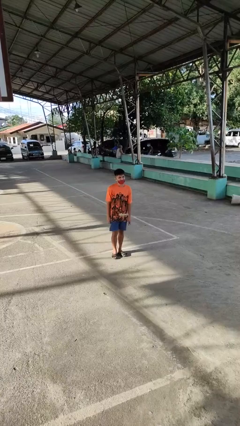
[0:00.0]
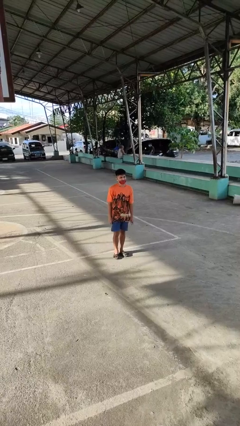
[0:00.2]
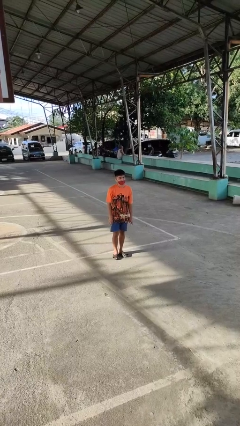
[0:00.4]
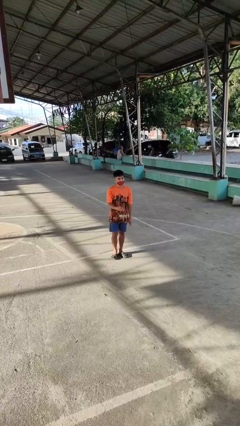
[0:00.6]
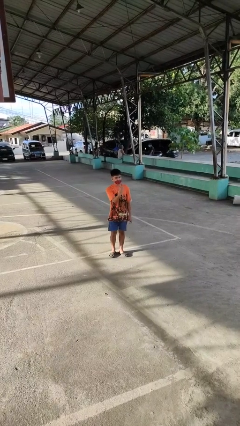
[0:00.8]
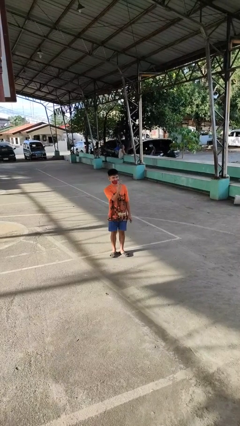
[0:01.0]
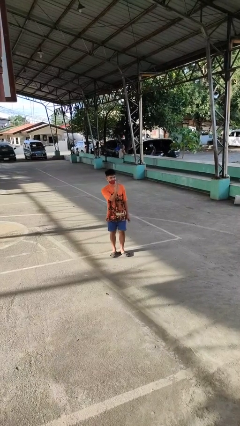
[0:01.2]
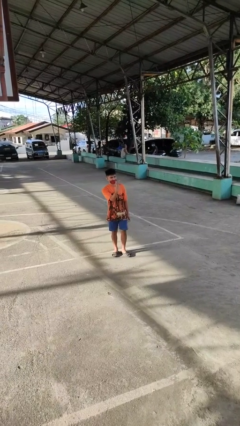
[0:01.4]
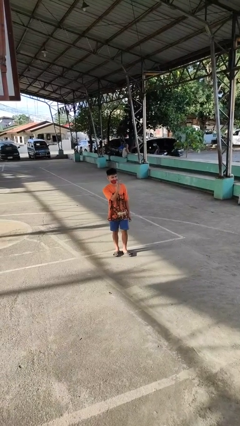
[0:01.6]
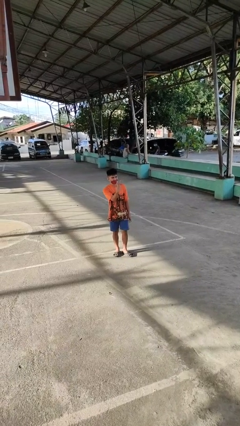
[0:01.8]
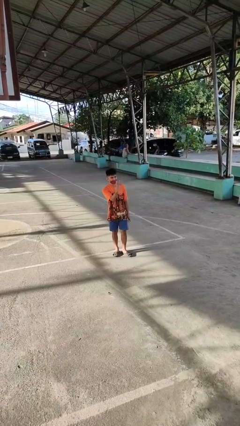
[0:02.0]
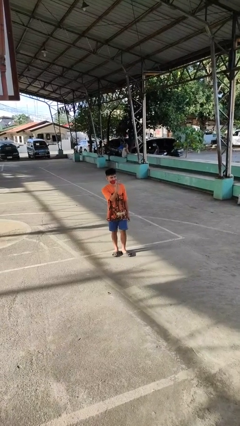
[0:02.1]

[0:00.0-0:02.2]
person gestures peace

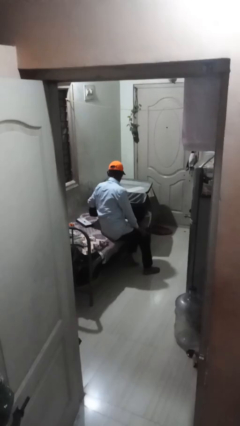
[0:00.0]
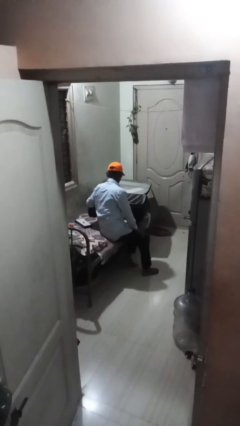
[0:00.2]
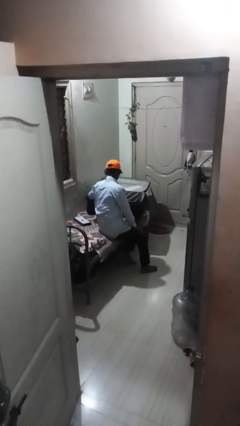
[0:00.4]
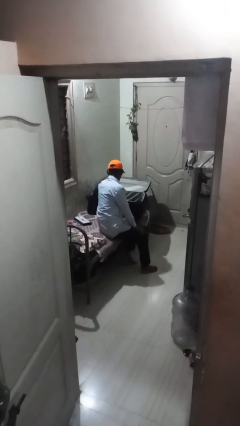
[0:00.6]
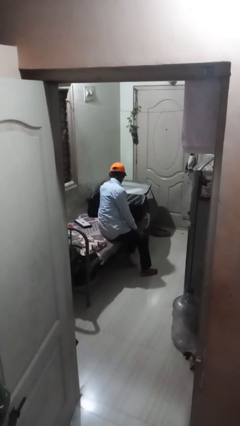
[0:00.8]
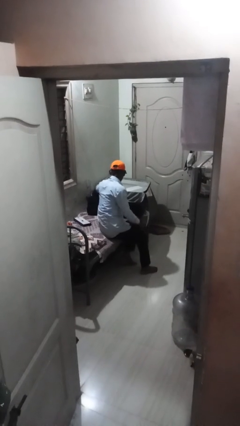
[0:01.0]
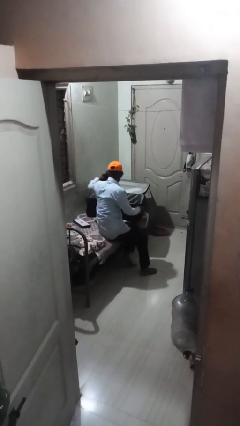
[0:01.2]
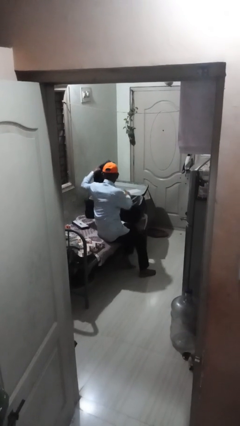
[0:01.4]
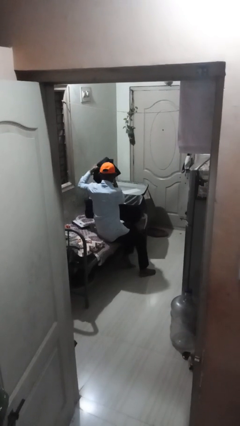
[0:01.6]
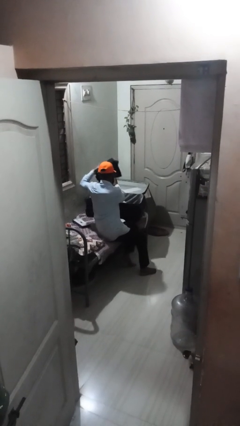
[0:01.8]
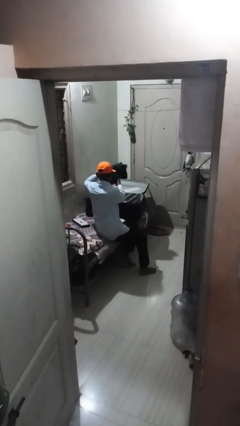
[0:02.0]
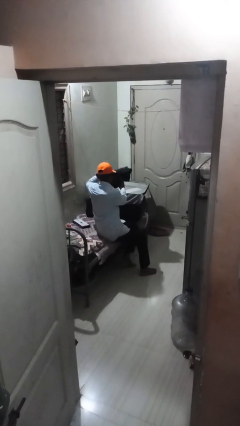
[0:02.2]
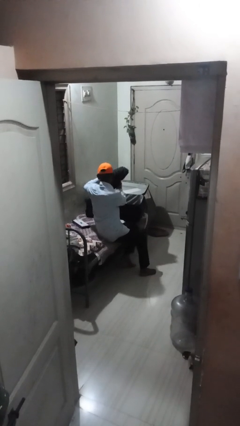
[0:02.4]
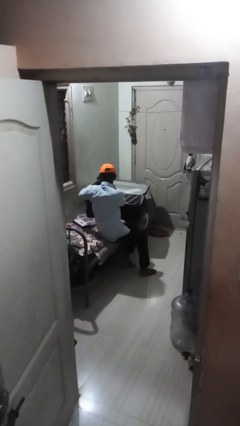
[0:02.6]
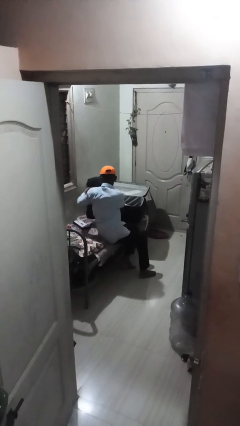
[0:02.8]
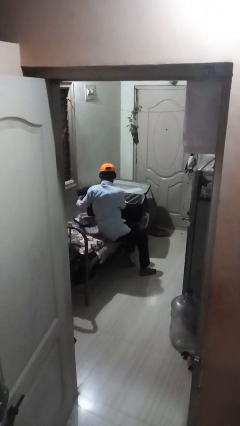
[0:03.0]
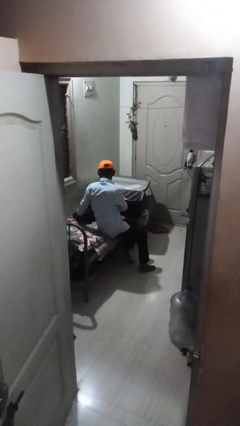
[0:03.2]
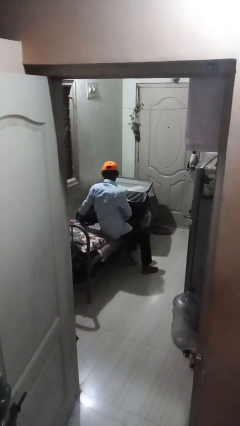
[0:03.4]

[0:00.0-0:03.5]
person unloads clothes from suitcase

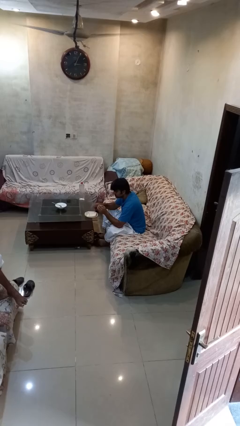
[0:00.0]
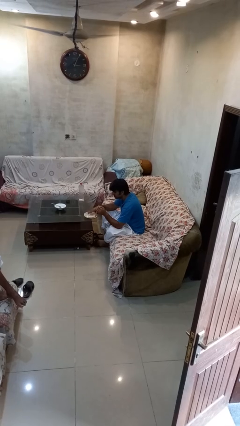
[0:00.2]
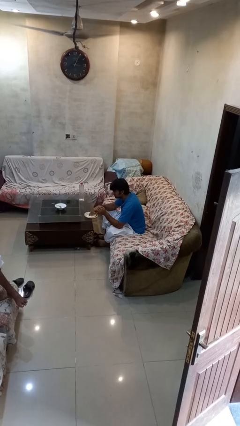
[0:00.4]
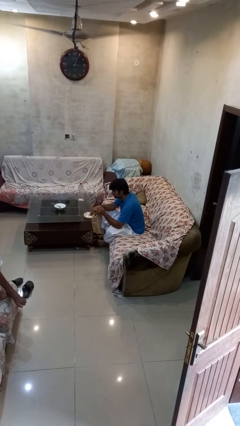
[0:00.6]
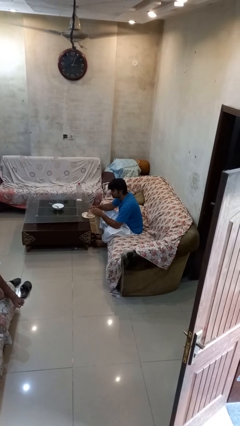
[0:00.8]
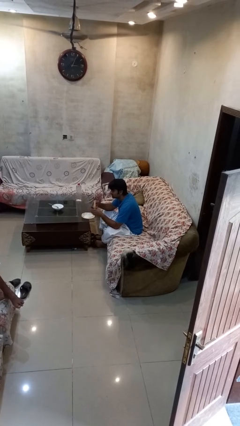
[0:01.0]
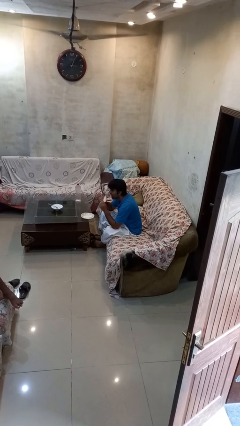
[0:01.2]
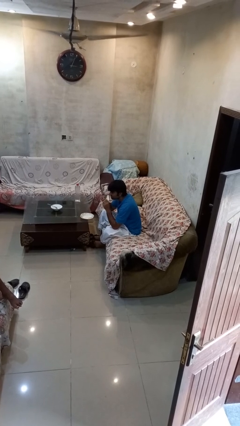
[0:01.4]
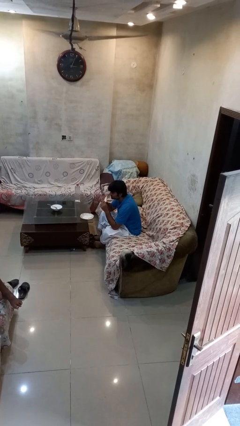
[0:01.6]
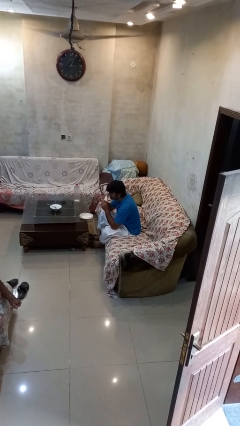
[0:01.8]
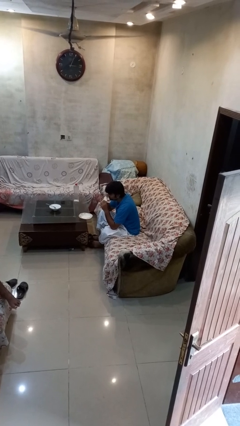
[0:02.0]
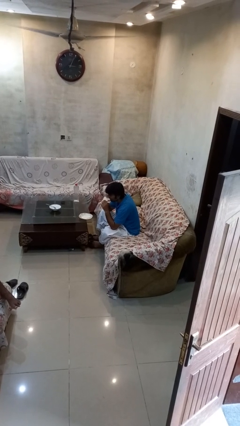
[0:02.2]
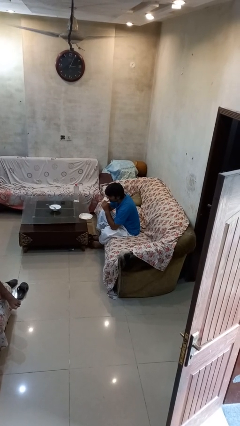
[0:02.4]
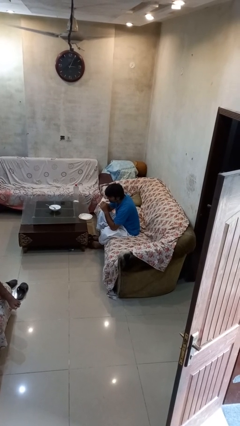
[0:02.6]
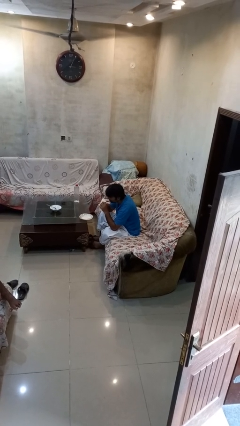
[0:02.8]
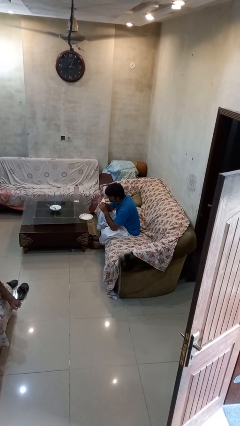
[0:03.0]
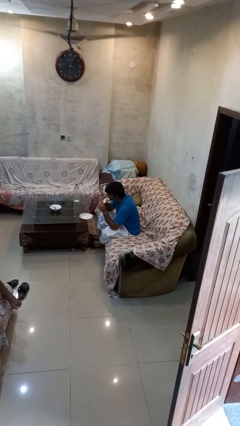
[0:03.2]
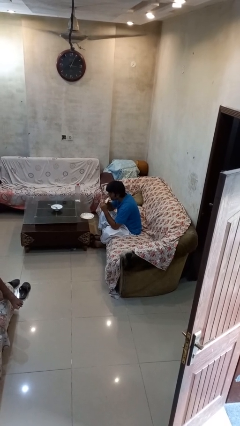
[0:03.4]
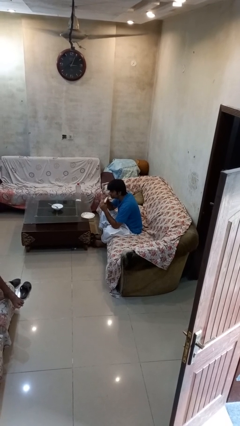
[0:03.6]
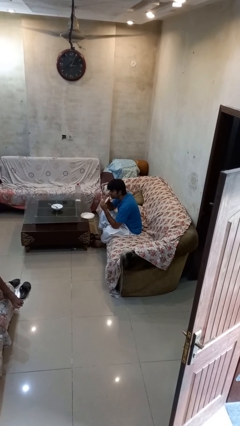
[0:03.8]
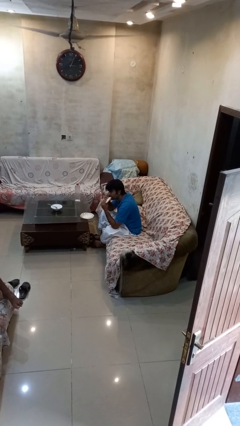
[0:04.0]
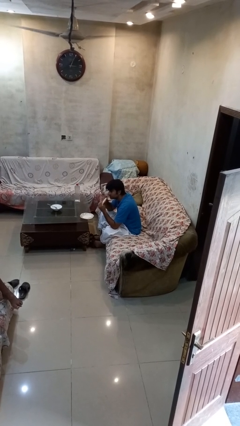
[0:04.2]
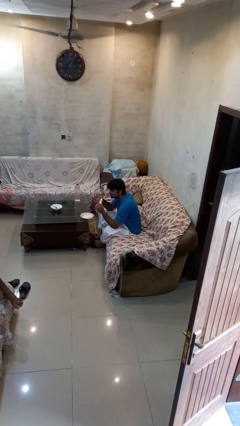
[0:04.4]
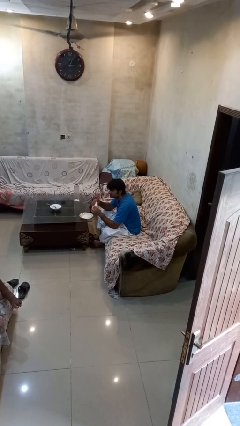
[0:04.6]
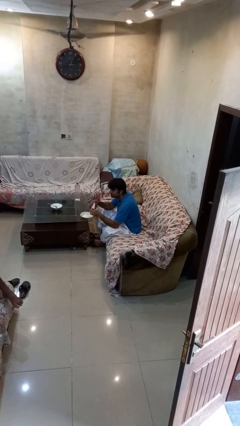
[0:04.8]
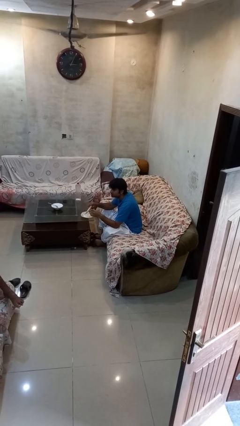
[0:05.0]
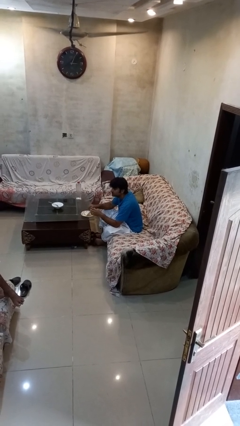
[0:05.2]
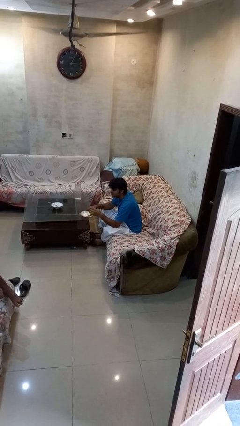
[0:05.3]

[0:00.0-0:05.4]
person eats with hands

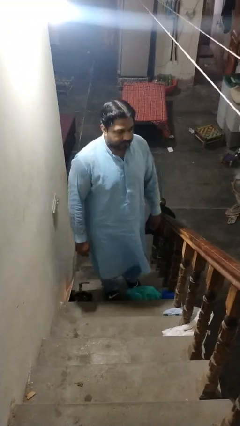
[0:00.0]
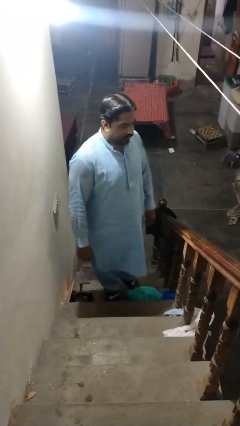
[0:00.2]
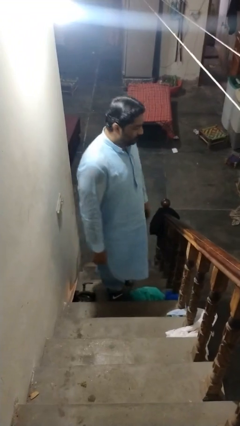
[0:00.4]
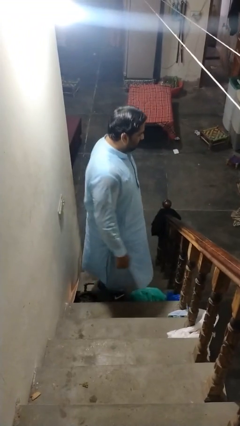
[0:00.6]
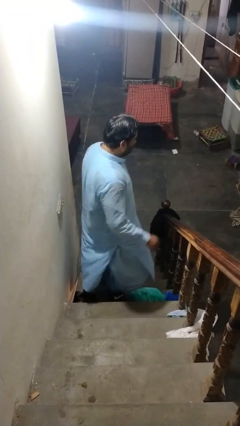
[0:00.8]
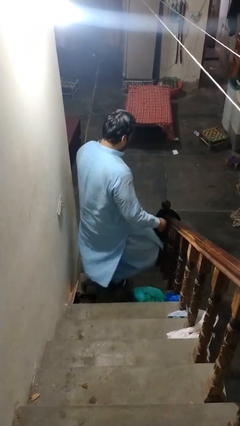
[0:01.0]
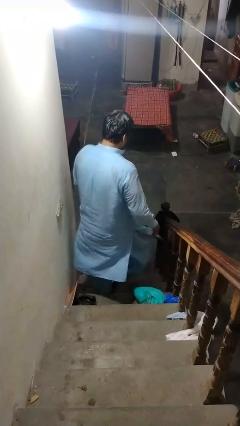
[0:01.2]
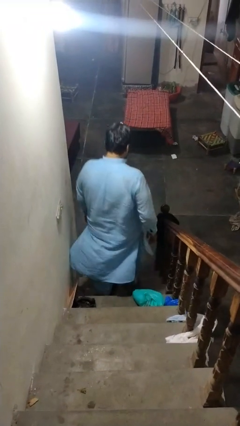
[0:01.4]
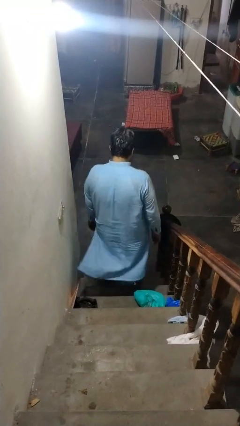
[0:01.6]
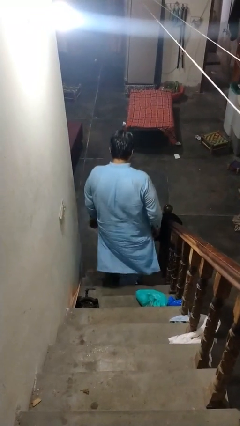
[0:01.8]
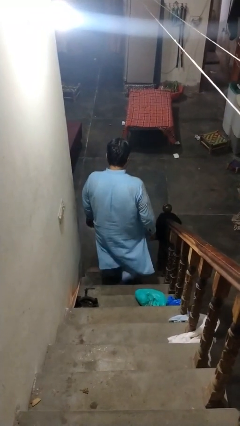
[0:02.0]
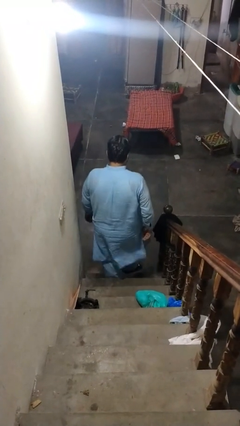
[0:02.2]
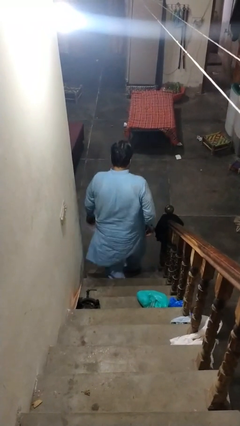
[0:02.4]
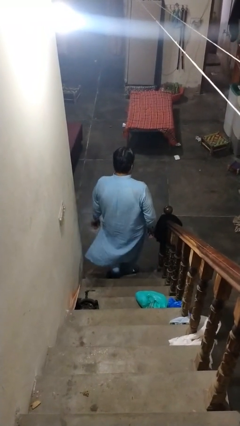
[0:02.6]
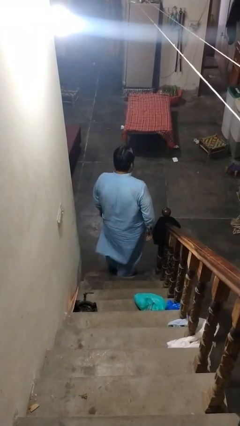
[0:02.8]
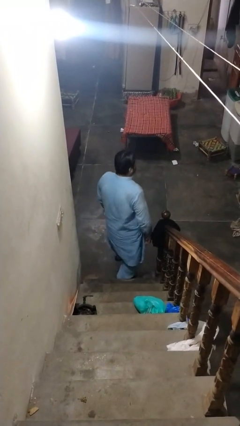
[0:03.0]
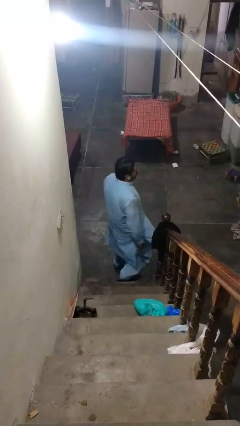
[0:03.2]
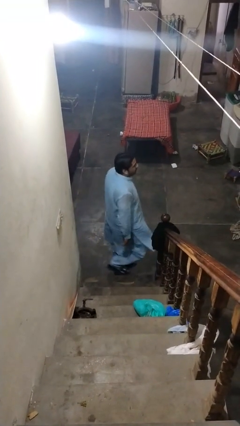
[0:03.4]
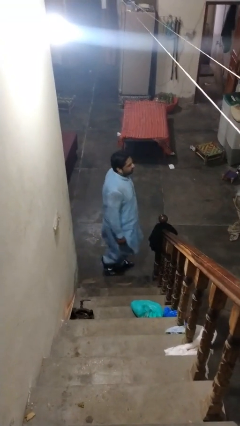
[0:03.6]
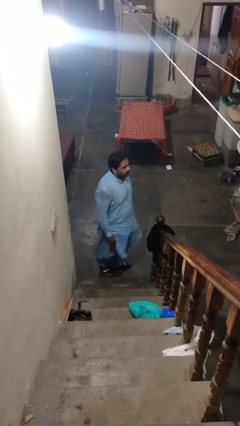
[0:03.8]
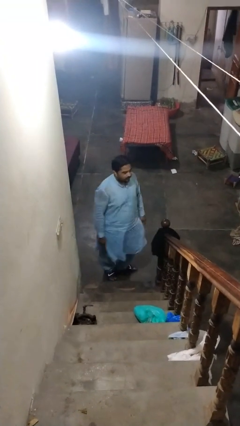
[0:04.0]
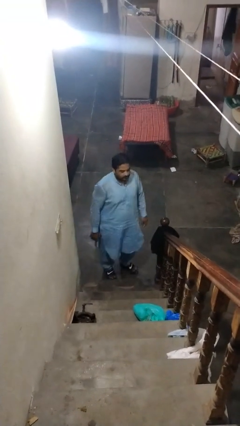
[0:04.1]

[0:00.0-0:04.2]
person climbs down stairs

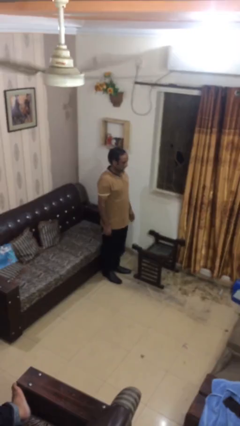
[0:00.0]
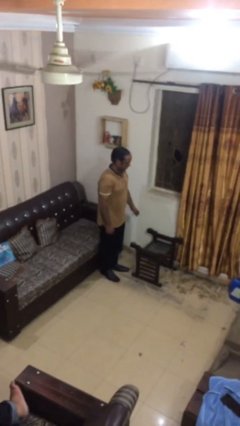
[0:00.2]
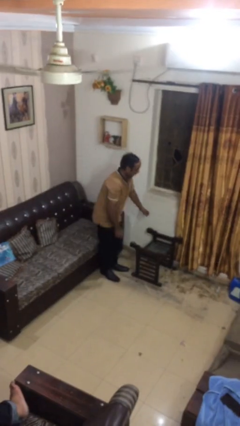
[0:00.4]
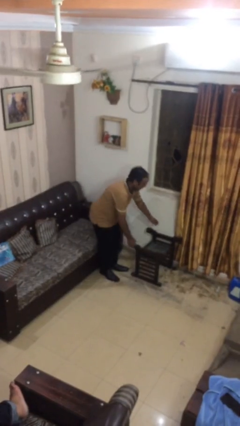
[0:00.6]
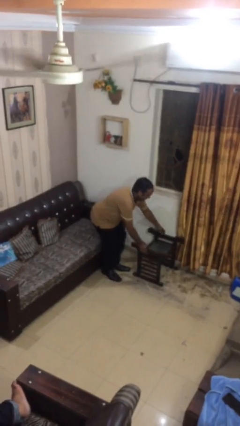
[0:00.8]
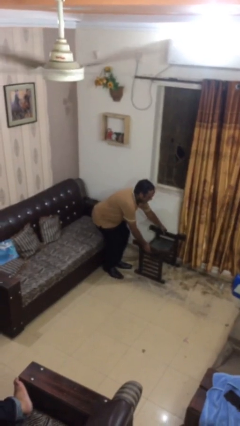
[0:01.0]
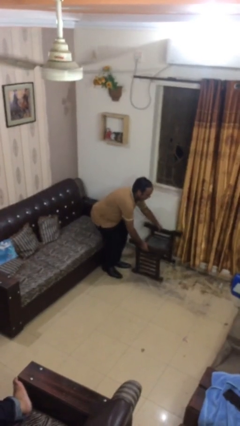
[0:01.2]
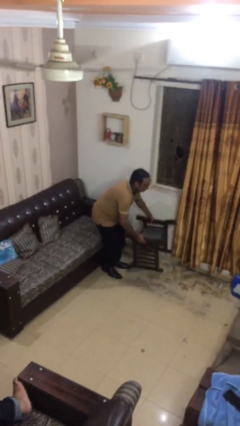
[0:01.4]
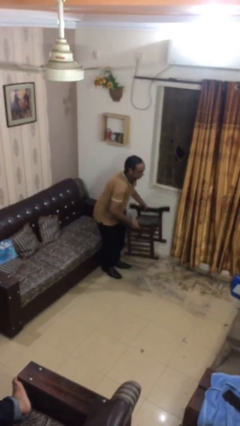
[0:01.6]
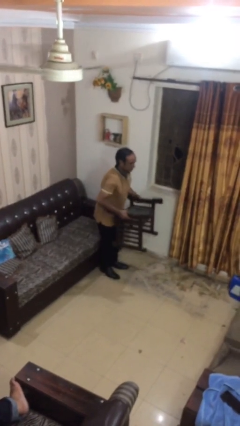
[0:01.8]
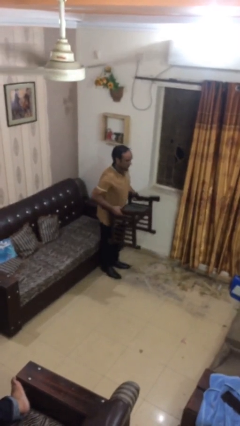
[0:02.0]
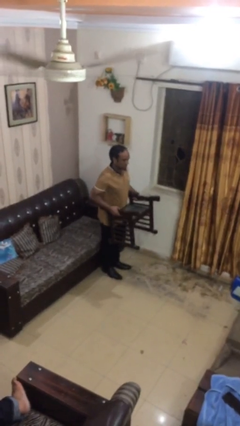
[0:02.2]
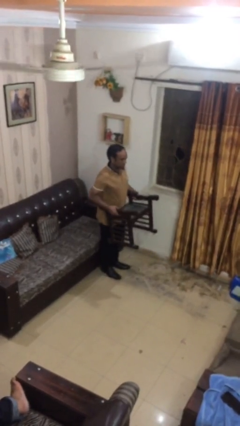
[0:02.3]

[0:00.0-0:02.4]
person picks up object from floor

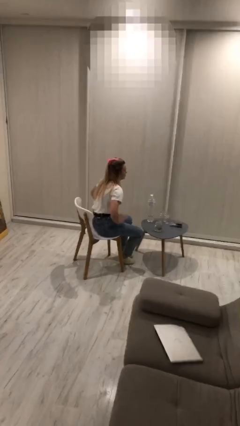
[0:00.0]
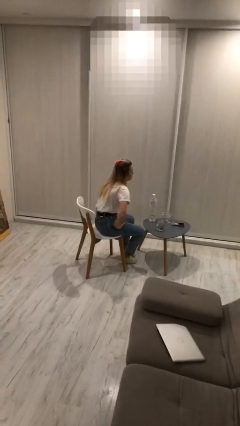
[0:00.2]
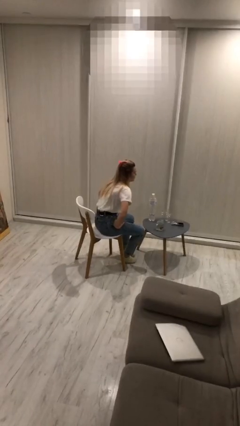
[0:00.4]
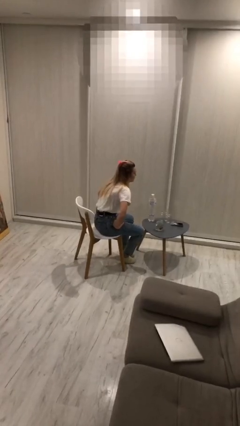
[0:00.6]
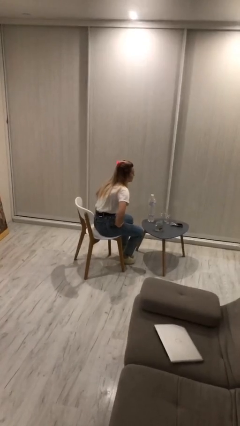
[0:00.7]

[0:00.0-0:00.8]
person slaps hands on thighs
